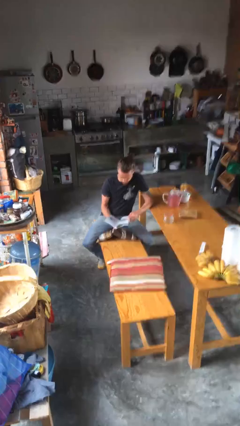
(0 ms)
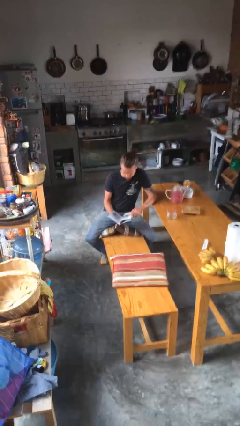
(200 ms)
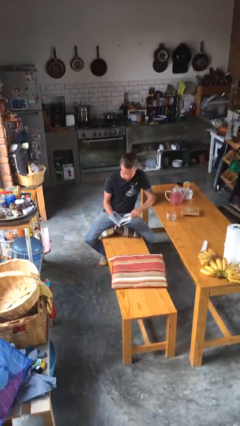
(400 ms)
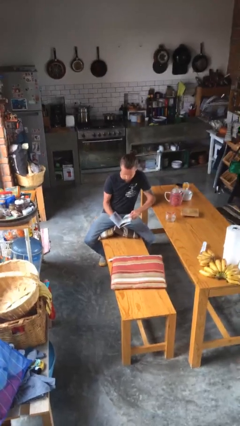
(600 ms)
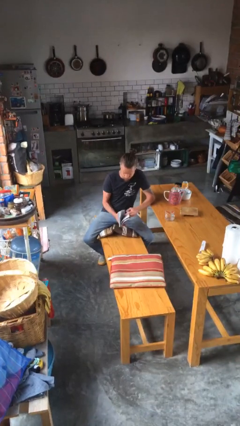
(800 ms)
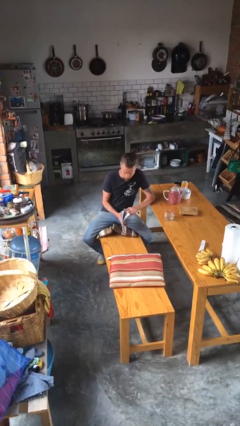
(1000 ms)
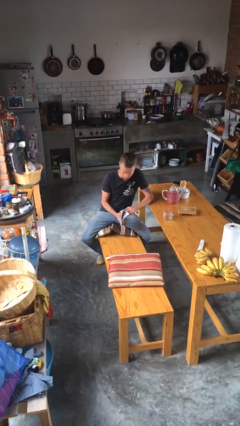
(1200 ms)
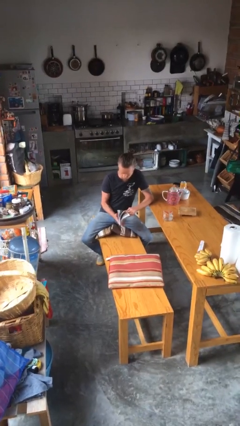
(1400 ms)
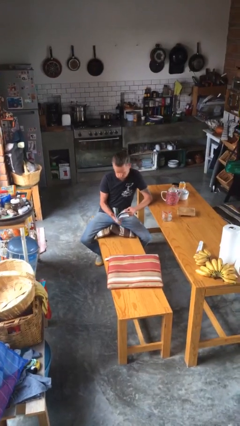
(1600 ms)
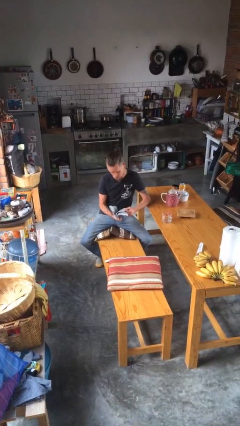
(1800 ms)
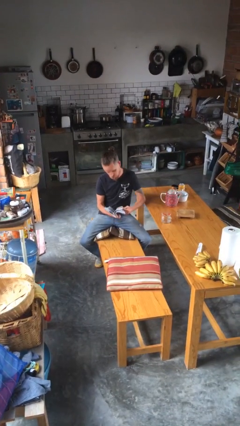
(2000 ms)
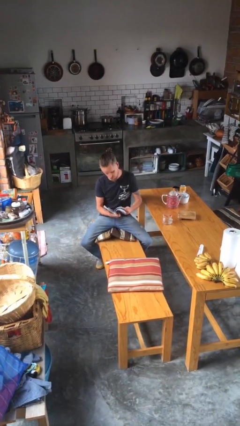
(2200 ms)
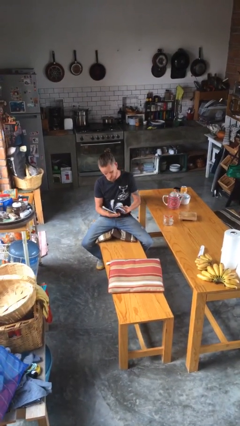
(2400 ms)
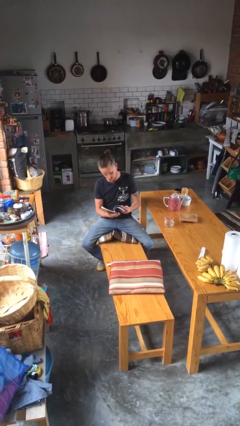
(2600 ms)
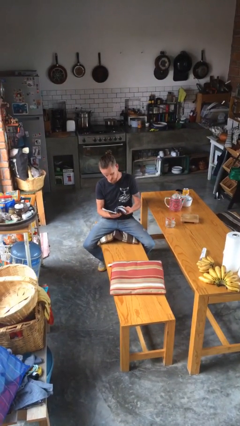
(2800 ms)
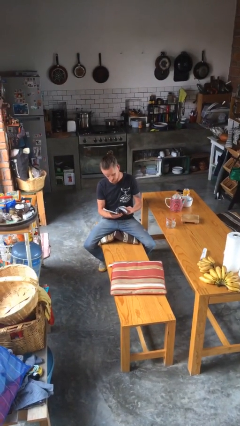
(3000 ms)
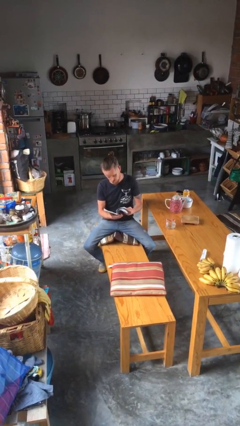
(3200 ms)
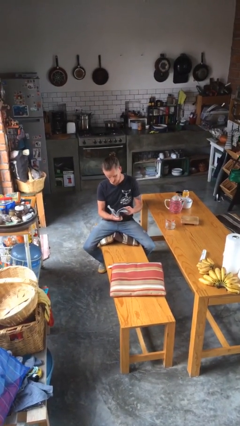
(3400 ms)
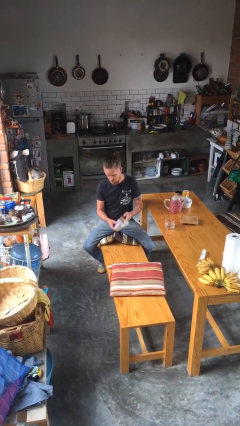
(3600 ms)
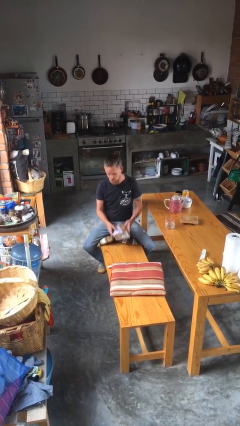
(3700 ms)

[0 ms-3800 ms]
person reads magazine

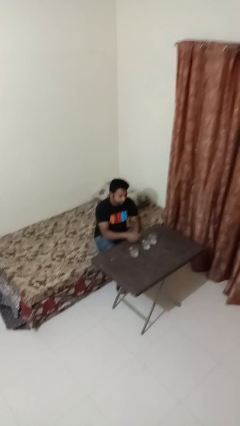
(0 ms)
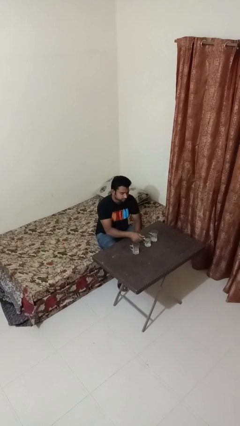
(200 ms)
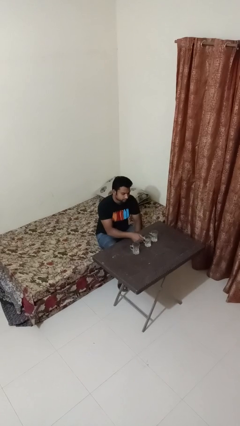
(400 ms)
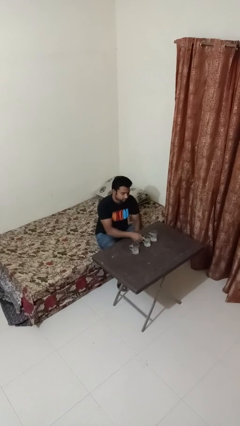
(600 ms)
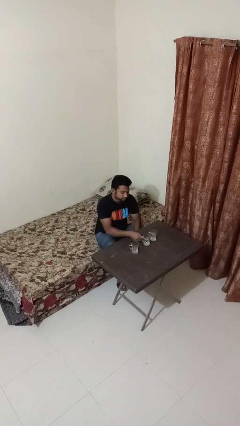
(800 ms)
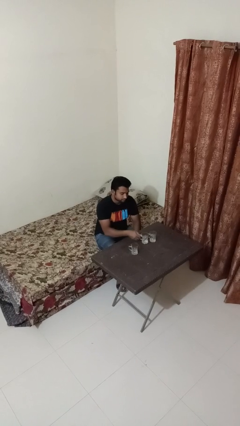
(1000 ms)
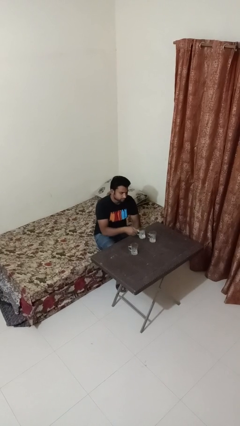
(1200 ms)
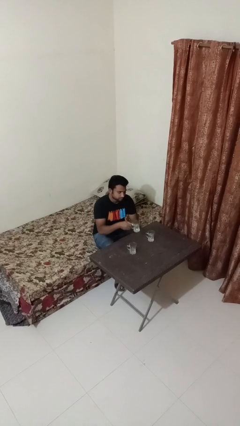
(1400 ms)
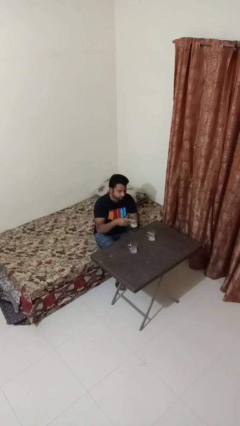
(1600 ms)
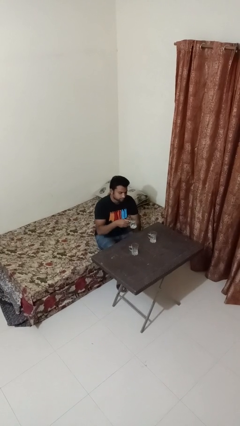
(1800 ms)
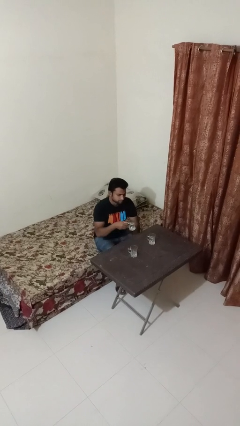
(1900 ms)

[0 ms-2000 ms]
person picks up object from table

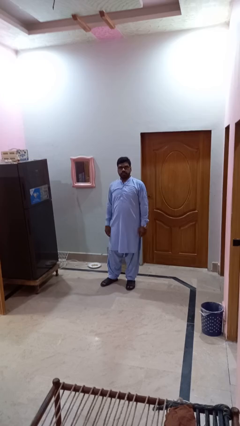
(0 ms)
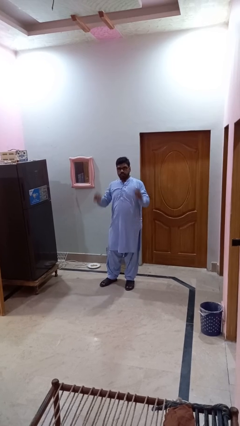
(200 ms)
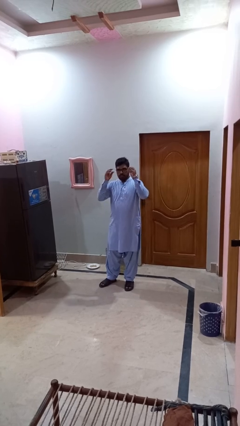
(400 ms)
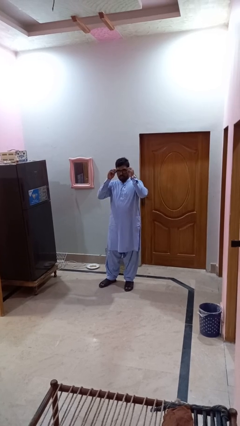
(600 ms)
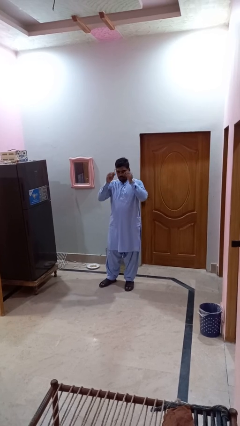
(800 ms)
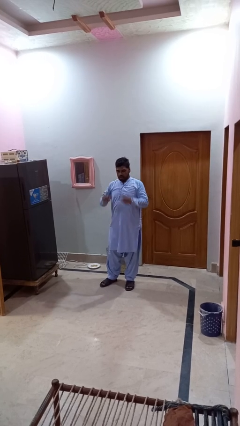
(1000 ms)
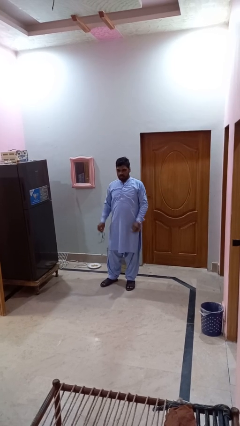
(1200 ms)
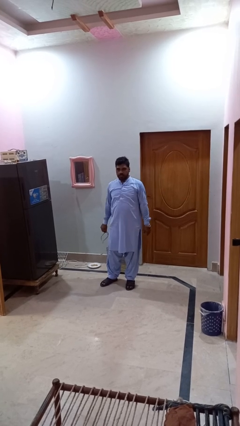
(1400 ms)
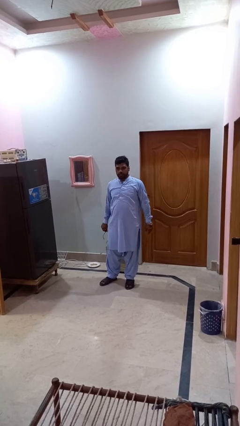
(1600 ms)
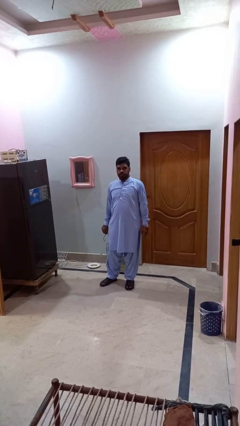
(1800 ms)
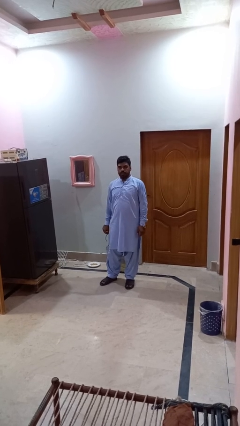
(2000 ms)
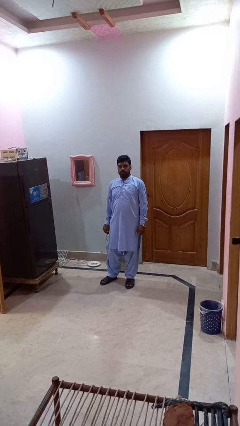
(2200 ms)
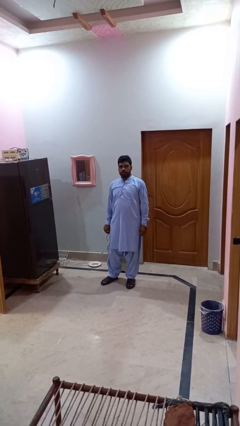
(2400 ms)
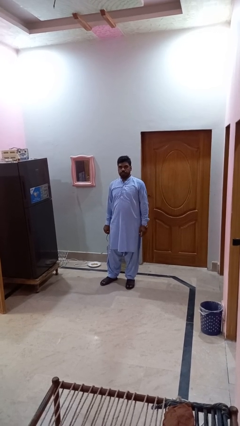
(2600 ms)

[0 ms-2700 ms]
person takes off glasses

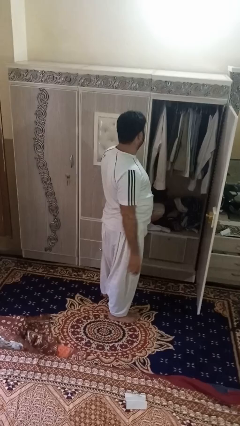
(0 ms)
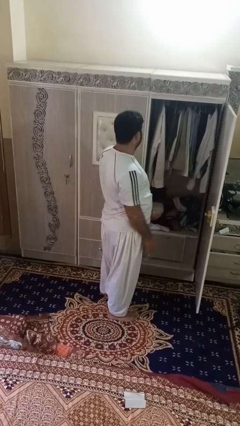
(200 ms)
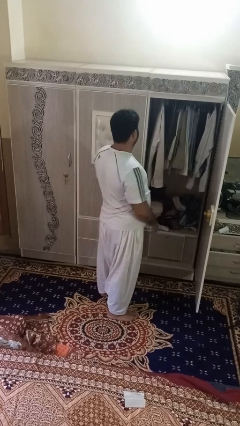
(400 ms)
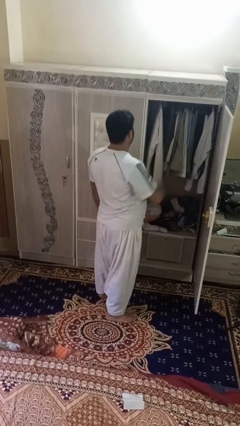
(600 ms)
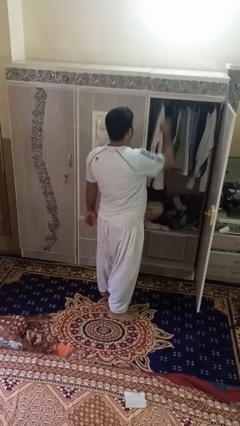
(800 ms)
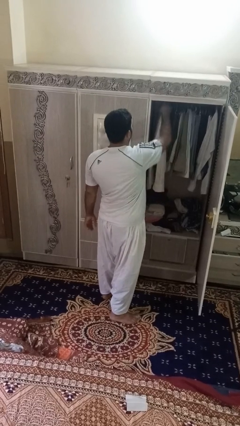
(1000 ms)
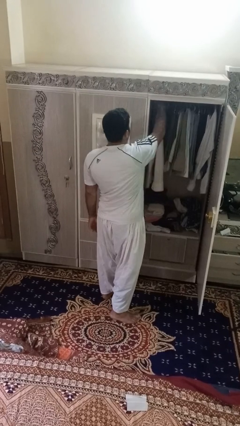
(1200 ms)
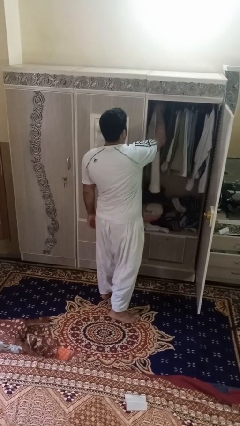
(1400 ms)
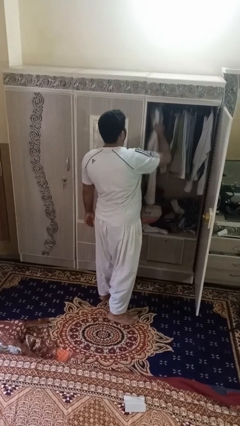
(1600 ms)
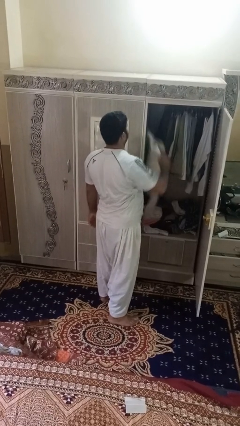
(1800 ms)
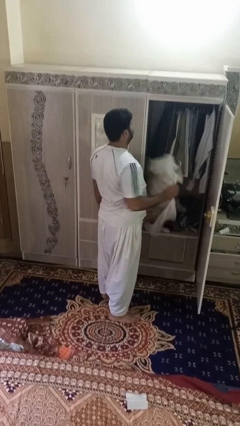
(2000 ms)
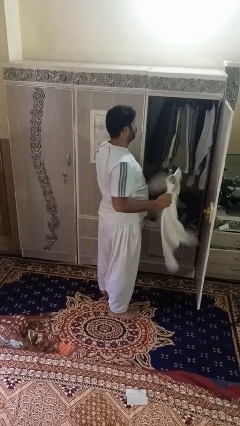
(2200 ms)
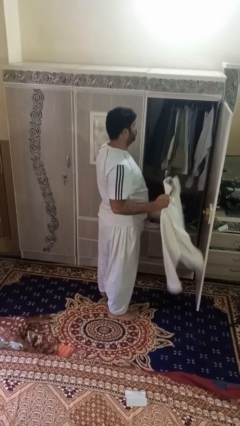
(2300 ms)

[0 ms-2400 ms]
person takes clothes from closet

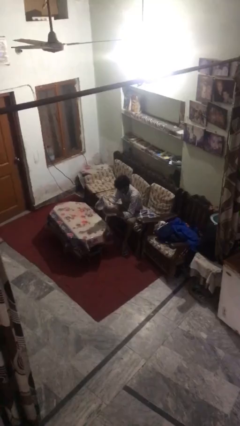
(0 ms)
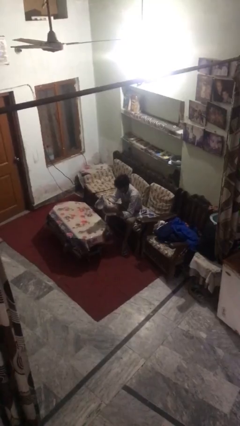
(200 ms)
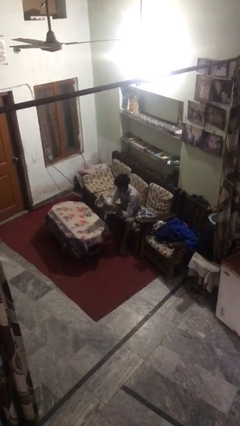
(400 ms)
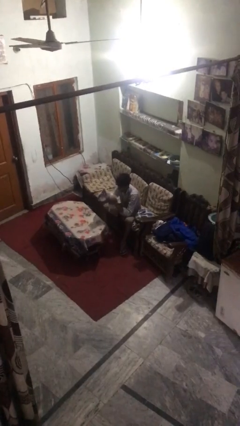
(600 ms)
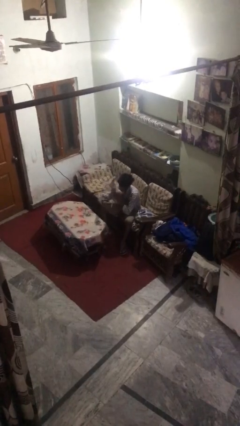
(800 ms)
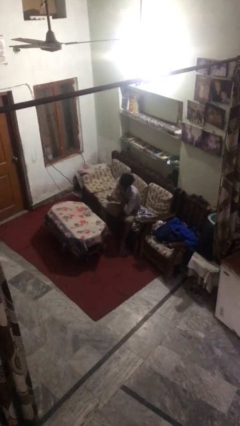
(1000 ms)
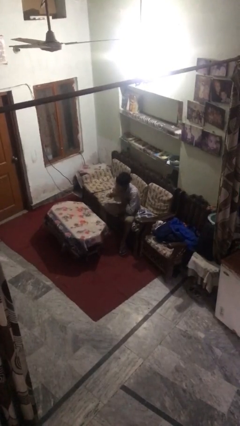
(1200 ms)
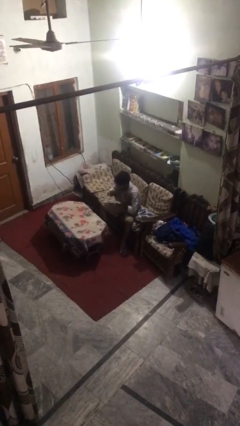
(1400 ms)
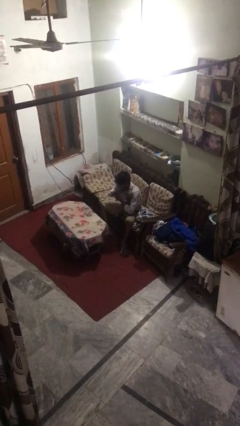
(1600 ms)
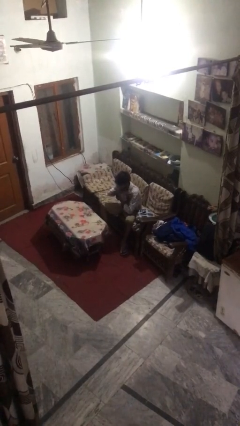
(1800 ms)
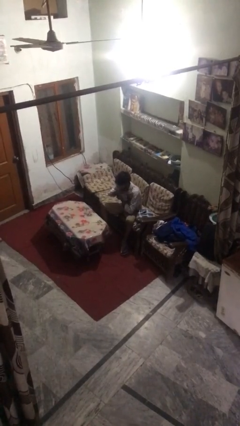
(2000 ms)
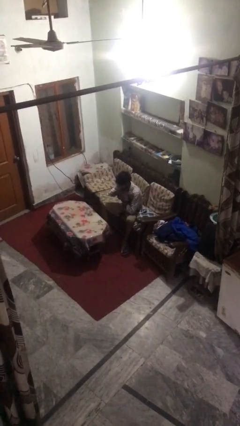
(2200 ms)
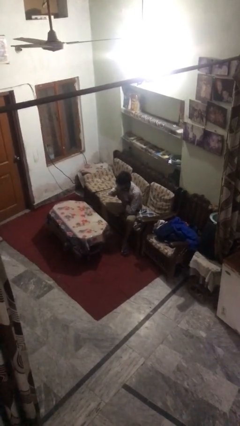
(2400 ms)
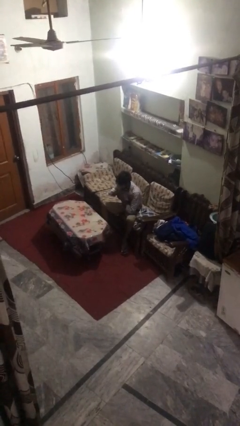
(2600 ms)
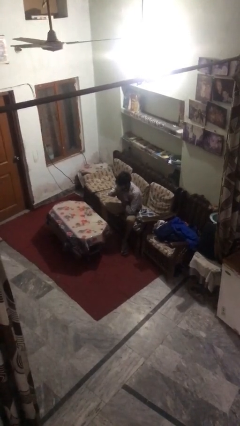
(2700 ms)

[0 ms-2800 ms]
person hugs stuffed animal

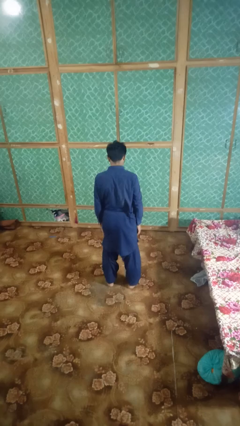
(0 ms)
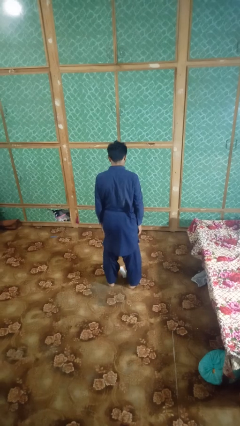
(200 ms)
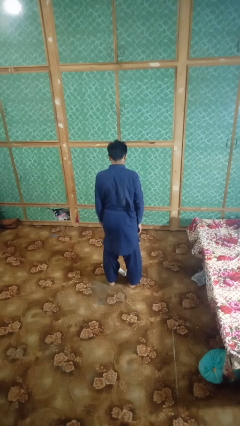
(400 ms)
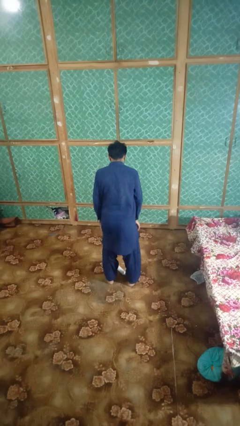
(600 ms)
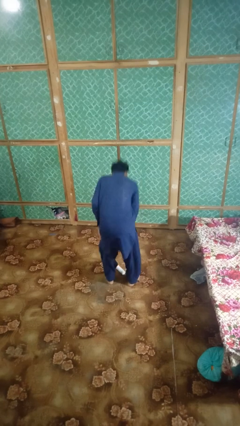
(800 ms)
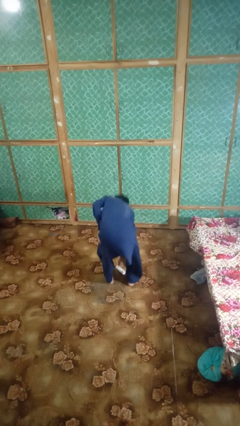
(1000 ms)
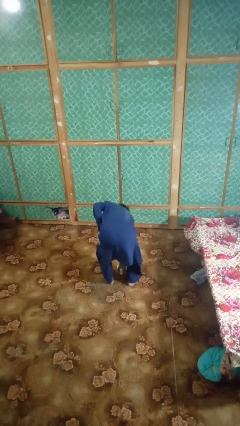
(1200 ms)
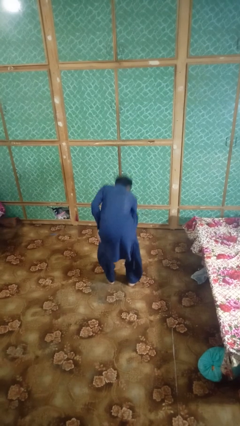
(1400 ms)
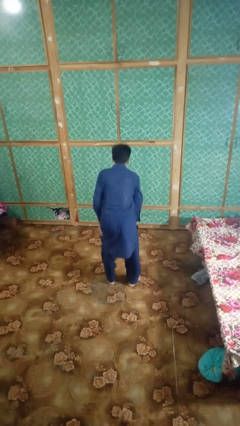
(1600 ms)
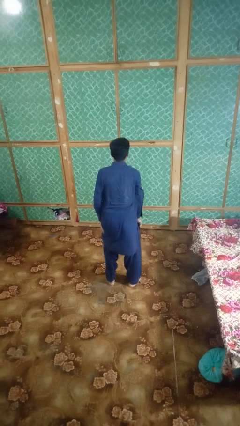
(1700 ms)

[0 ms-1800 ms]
person picks up object from floor

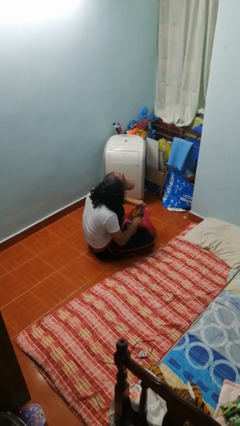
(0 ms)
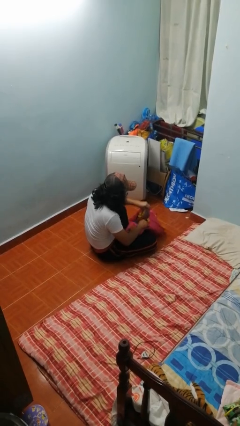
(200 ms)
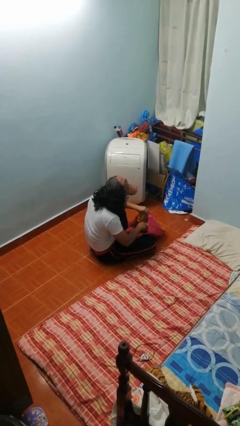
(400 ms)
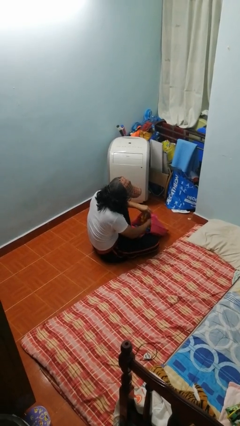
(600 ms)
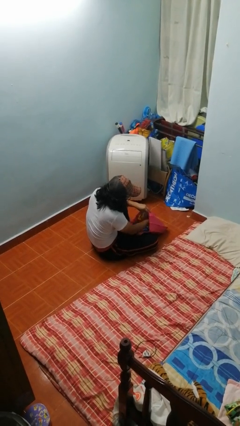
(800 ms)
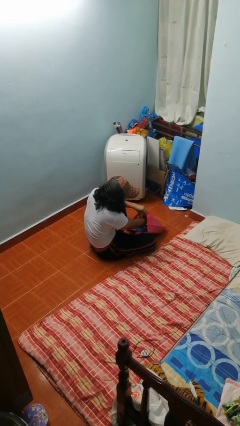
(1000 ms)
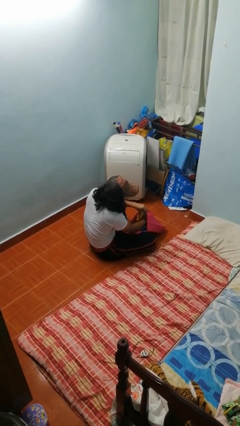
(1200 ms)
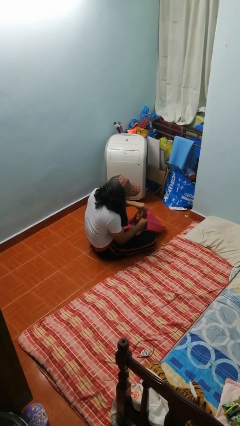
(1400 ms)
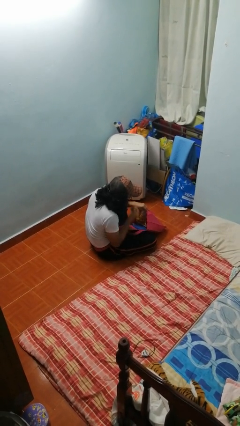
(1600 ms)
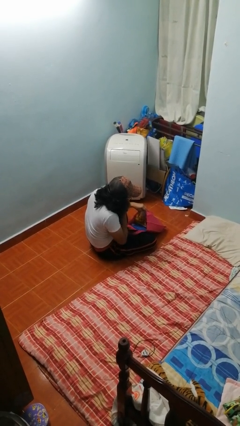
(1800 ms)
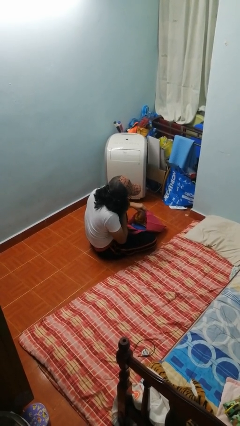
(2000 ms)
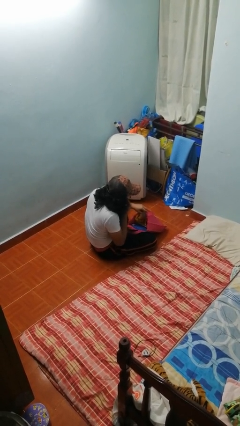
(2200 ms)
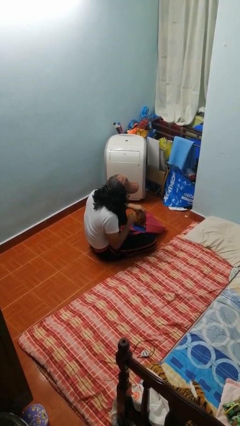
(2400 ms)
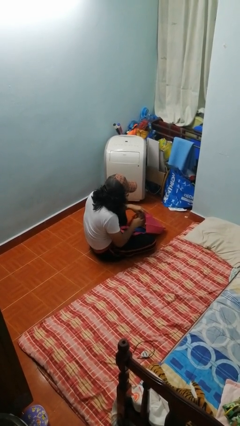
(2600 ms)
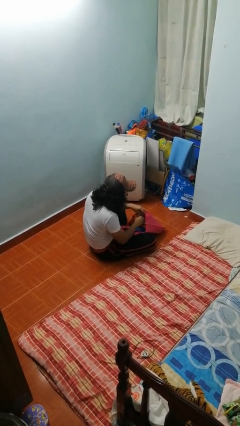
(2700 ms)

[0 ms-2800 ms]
person eats snack from bag
